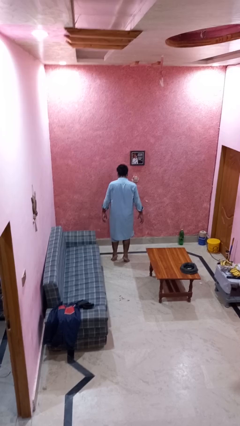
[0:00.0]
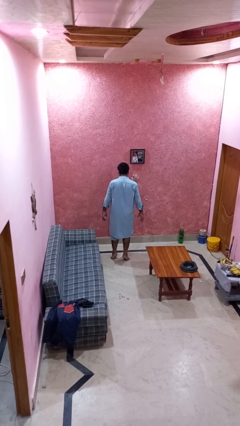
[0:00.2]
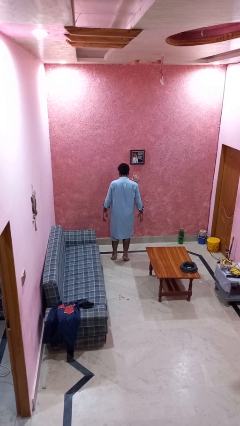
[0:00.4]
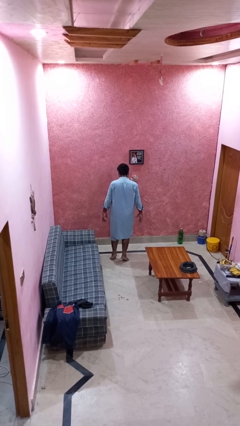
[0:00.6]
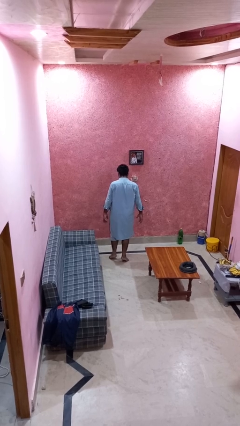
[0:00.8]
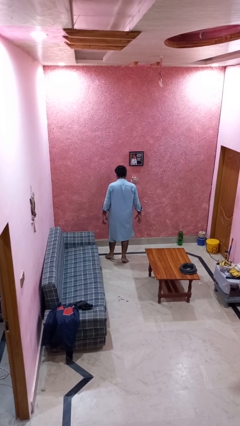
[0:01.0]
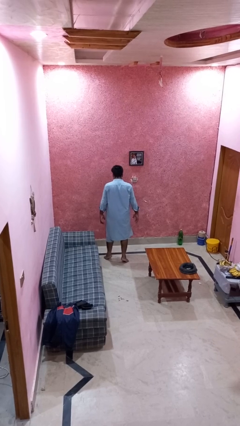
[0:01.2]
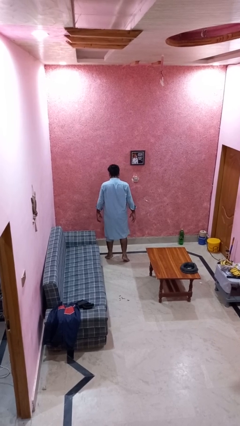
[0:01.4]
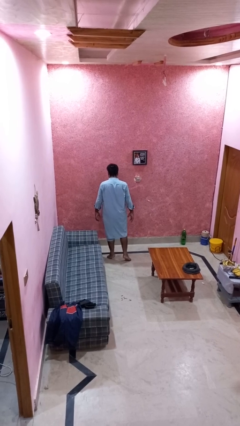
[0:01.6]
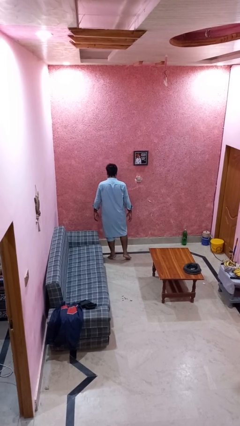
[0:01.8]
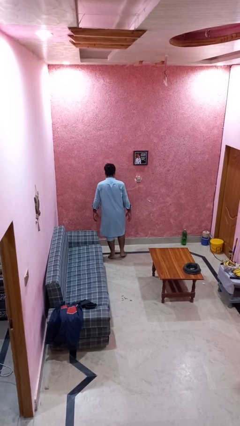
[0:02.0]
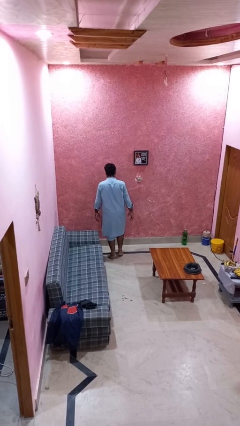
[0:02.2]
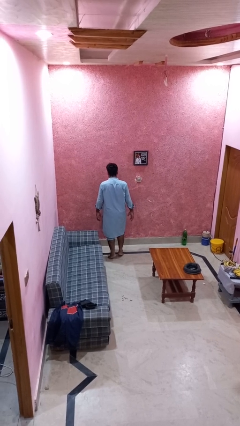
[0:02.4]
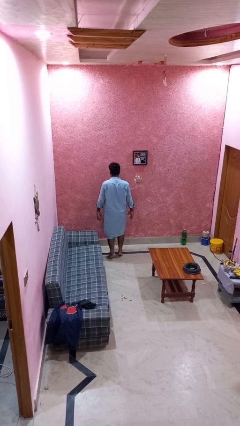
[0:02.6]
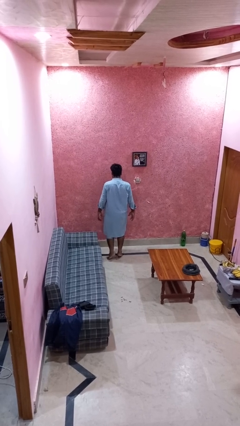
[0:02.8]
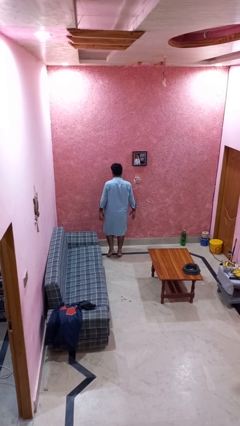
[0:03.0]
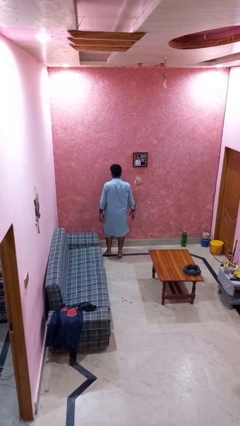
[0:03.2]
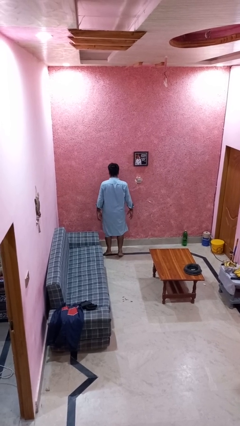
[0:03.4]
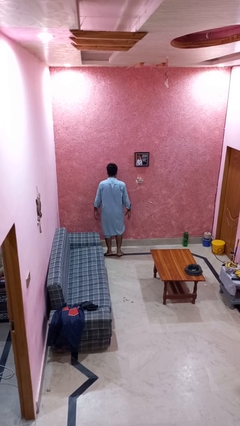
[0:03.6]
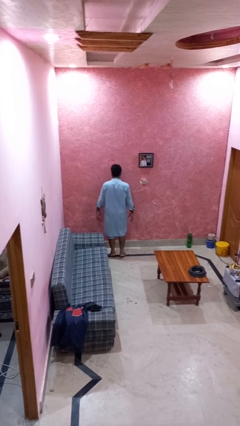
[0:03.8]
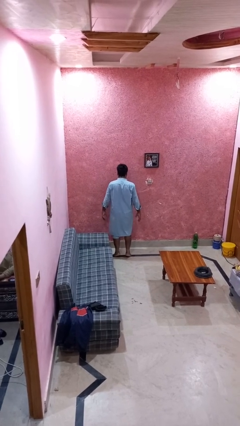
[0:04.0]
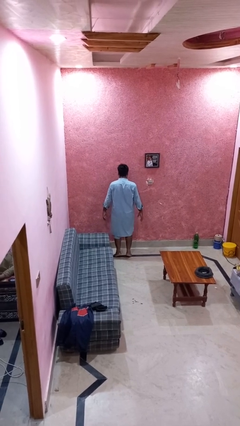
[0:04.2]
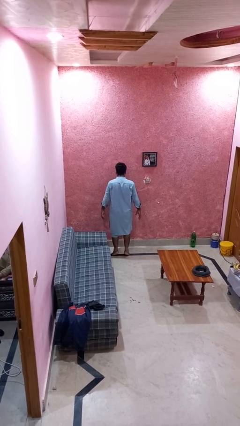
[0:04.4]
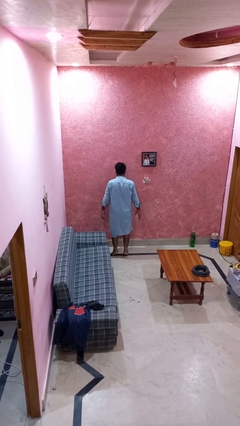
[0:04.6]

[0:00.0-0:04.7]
person walks tiptoe

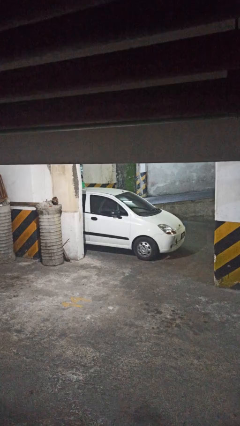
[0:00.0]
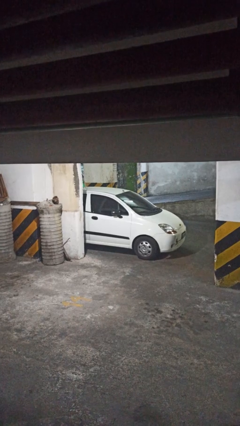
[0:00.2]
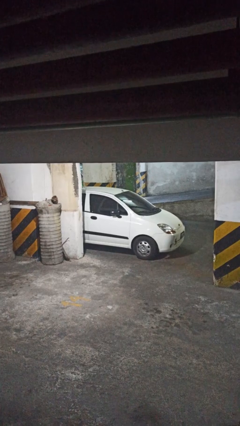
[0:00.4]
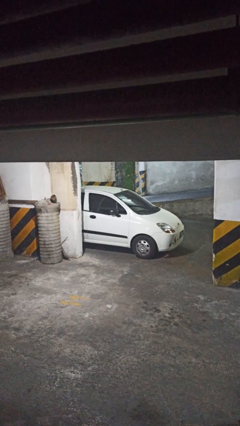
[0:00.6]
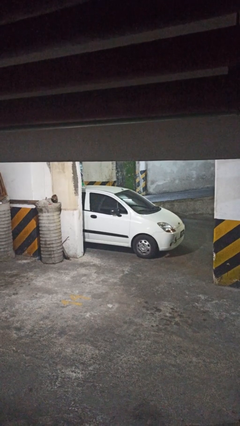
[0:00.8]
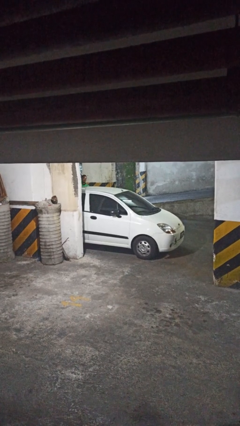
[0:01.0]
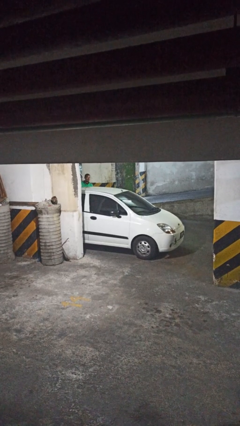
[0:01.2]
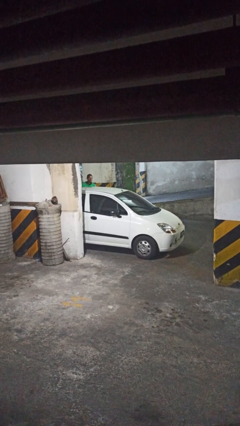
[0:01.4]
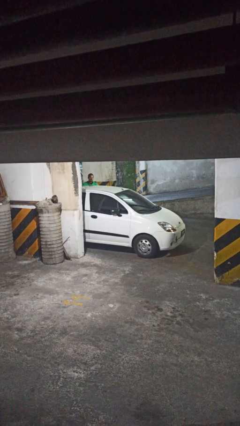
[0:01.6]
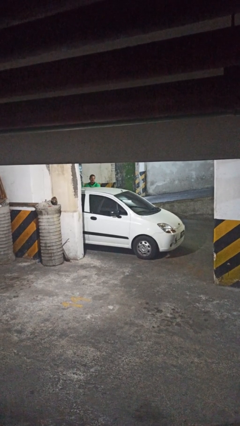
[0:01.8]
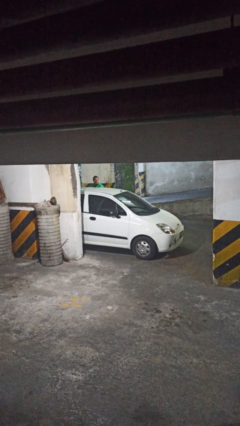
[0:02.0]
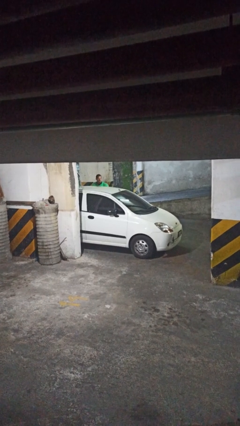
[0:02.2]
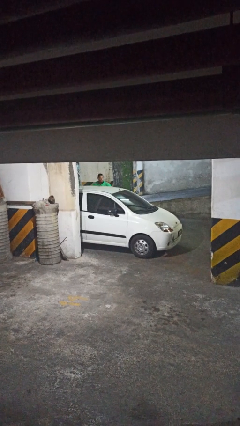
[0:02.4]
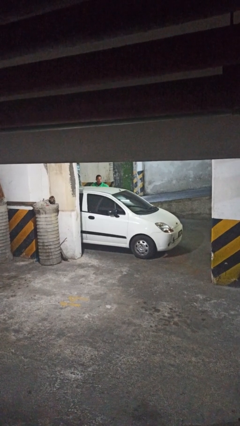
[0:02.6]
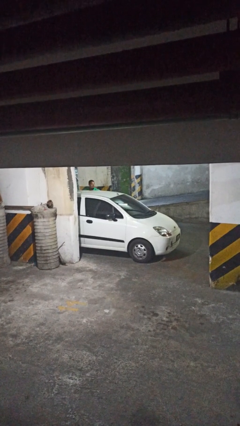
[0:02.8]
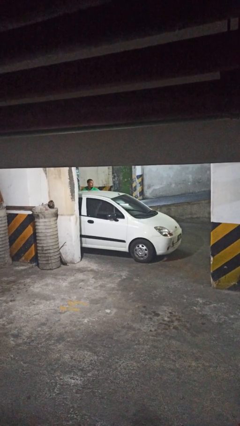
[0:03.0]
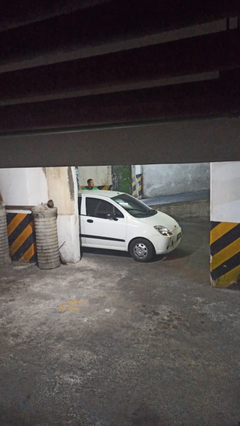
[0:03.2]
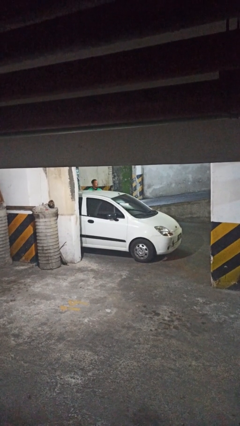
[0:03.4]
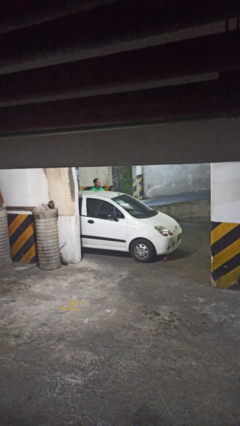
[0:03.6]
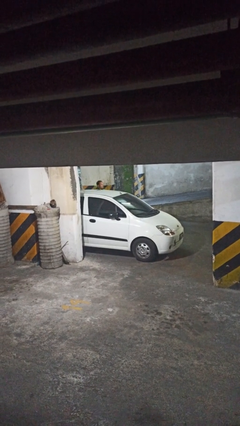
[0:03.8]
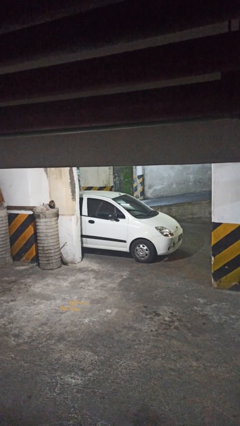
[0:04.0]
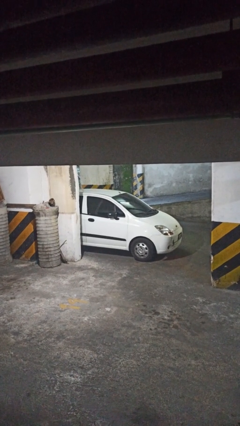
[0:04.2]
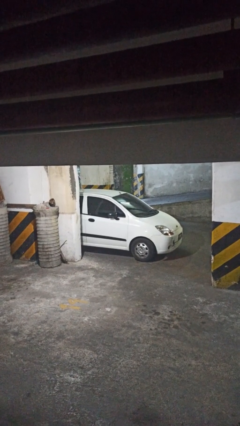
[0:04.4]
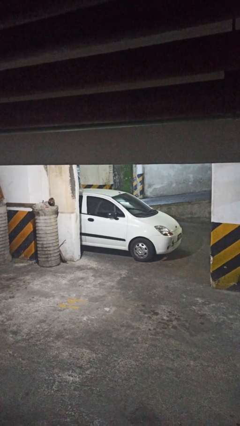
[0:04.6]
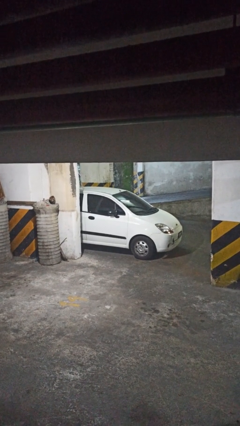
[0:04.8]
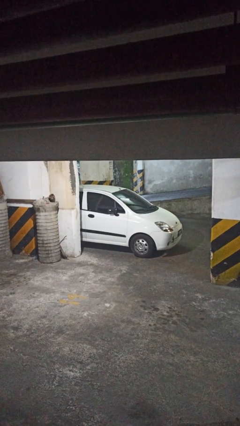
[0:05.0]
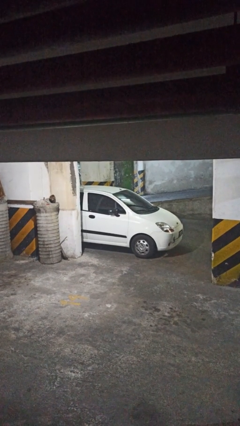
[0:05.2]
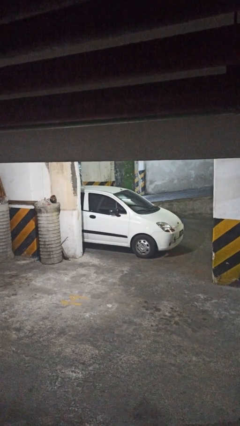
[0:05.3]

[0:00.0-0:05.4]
car picks up person

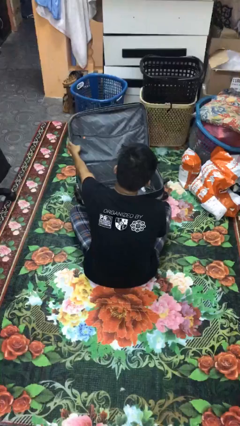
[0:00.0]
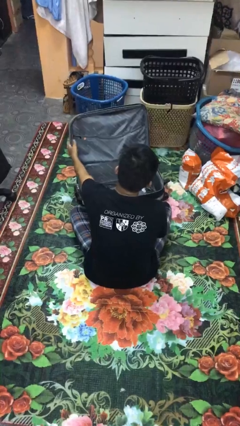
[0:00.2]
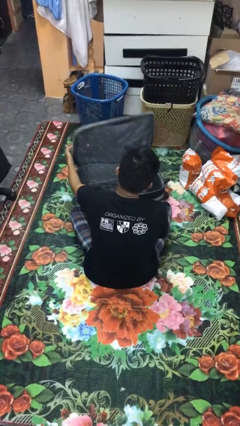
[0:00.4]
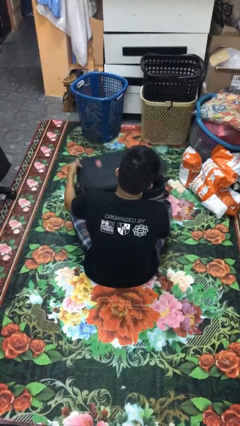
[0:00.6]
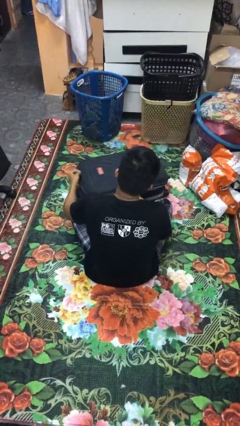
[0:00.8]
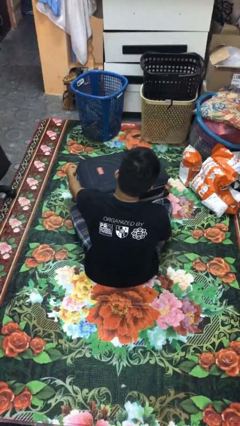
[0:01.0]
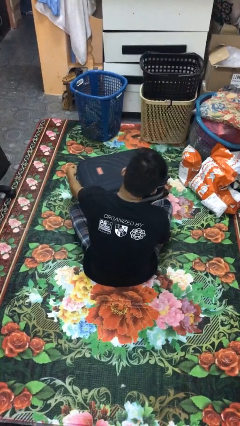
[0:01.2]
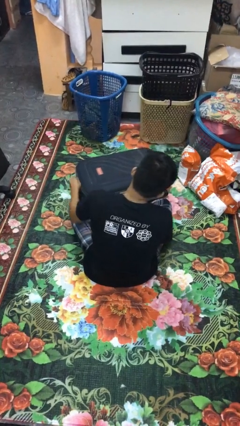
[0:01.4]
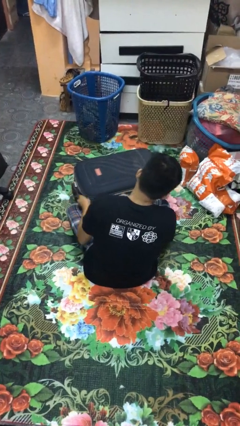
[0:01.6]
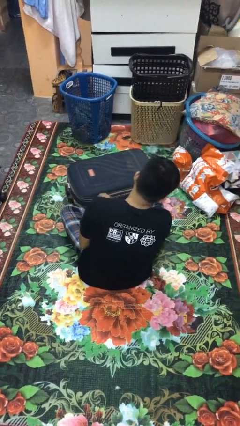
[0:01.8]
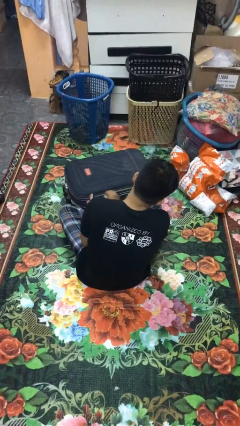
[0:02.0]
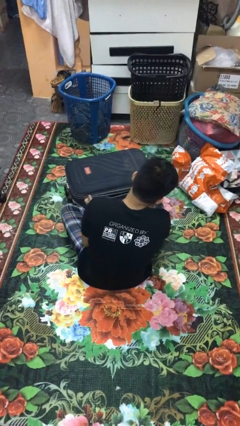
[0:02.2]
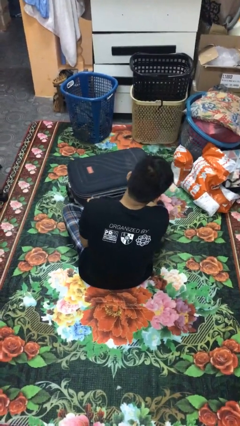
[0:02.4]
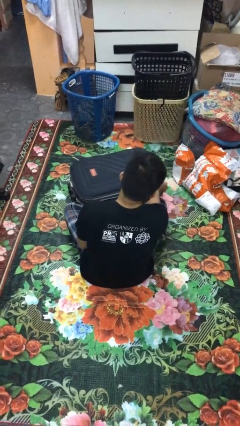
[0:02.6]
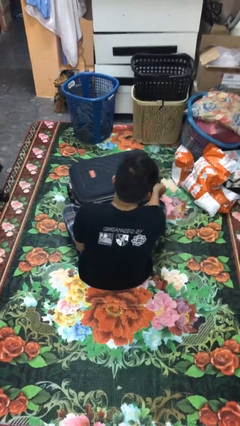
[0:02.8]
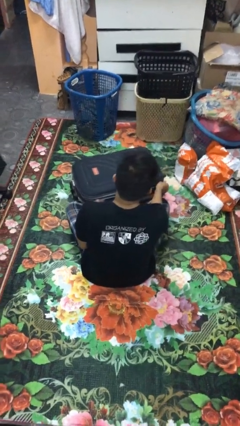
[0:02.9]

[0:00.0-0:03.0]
person closes suitcase

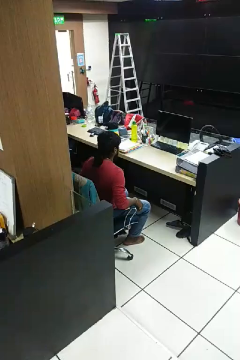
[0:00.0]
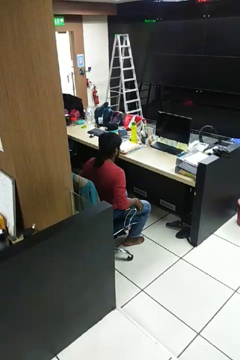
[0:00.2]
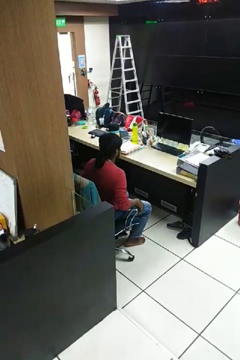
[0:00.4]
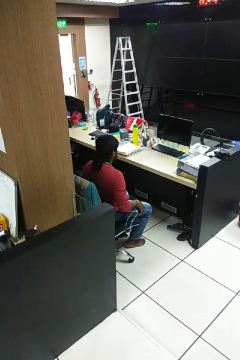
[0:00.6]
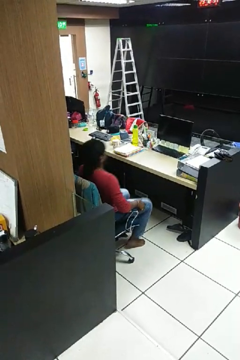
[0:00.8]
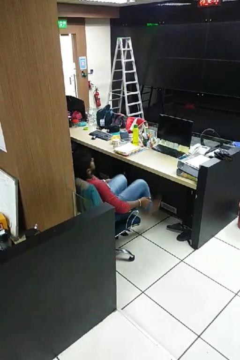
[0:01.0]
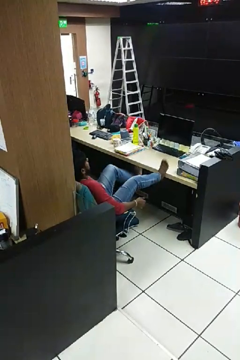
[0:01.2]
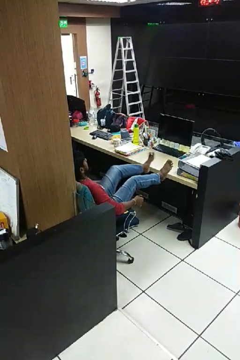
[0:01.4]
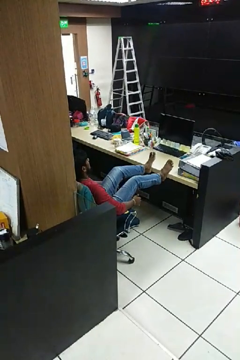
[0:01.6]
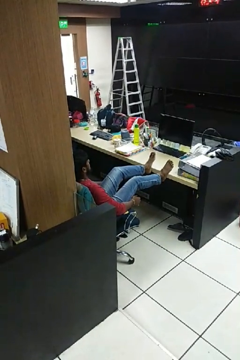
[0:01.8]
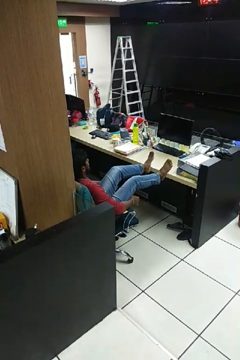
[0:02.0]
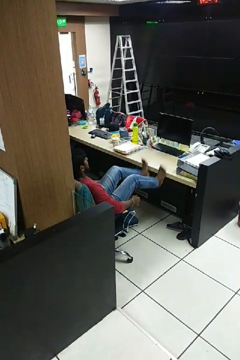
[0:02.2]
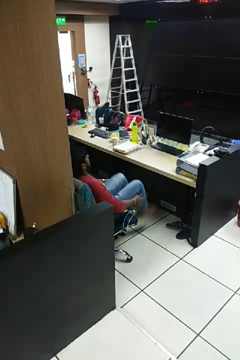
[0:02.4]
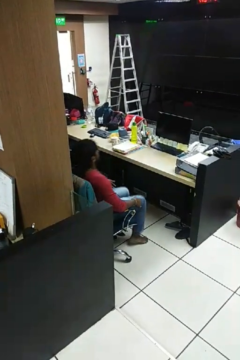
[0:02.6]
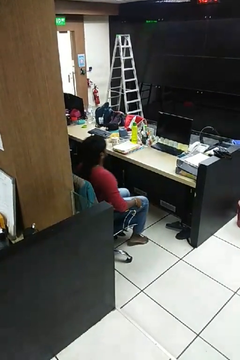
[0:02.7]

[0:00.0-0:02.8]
person puts feet up

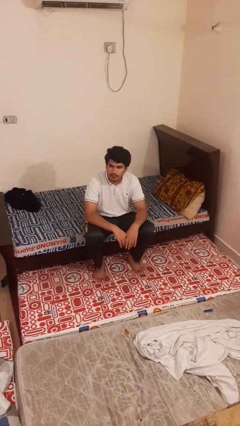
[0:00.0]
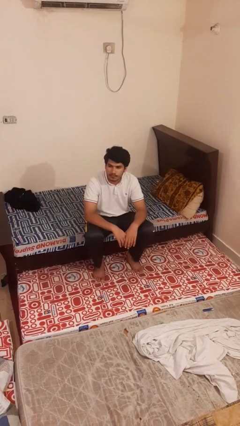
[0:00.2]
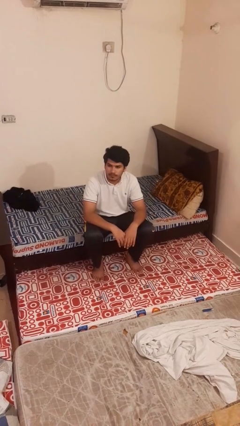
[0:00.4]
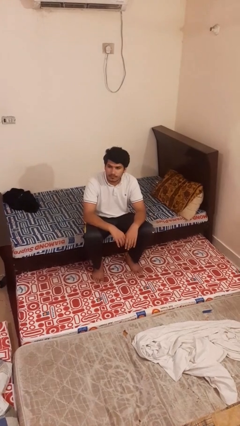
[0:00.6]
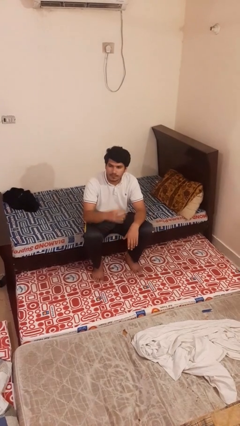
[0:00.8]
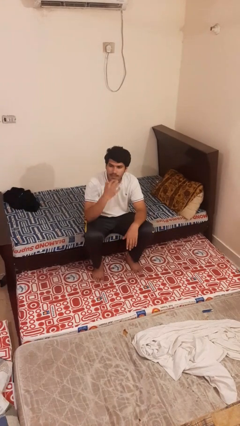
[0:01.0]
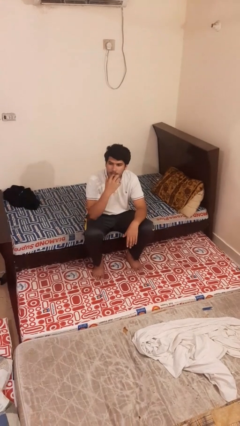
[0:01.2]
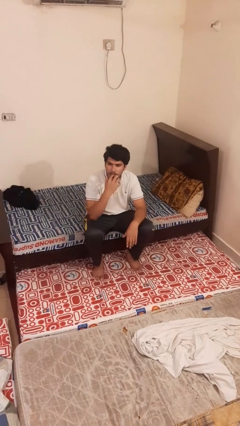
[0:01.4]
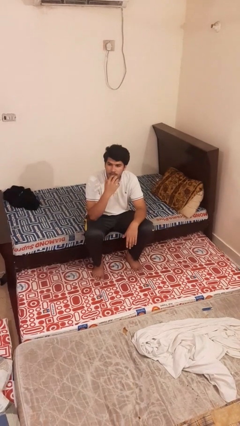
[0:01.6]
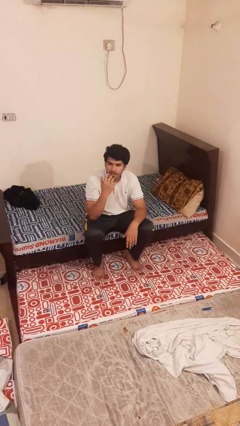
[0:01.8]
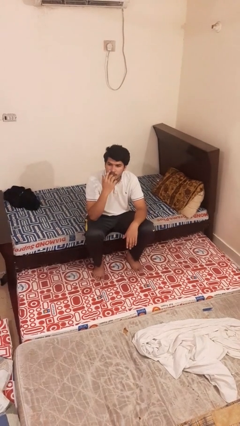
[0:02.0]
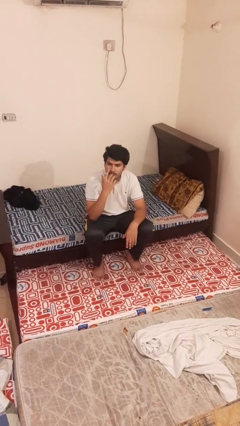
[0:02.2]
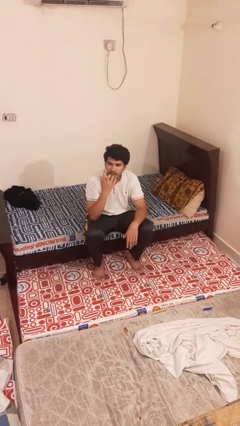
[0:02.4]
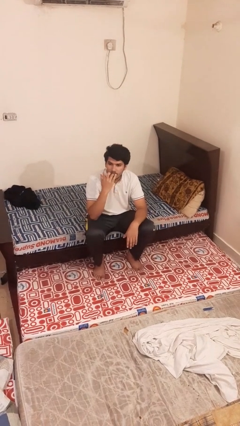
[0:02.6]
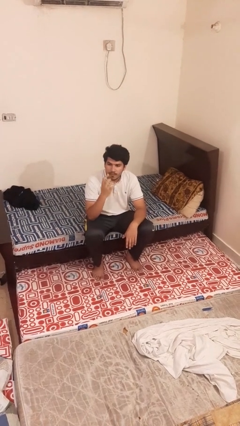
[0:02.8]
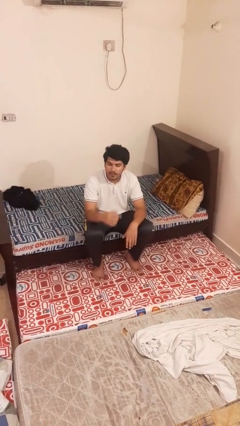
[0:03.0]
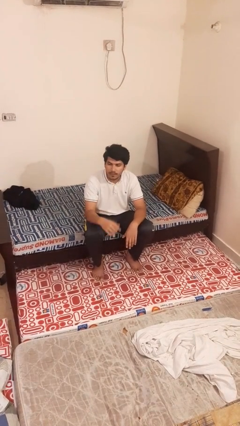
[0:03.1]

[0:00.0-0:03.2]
person licks fingers
